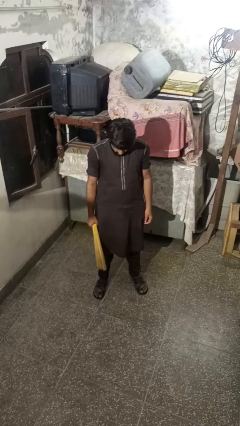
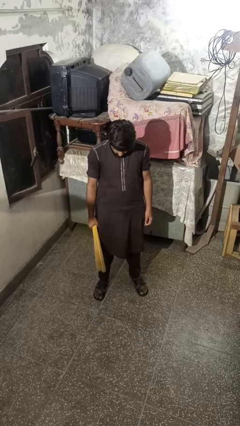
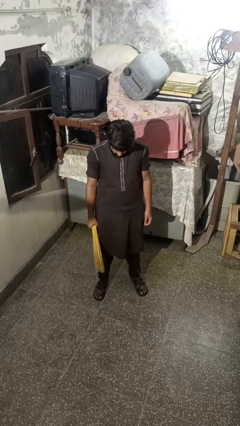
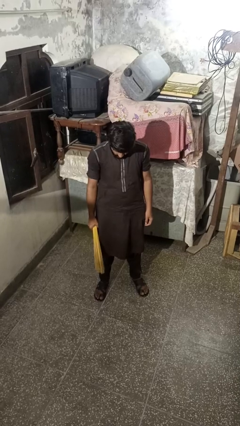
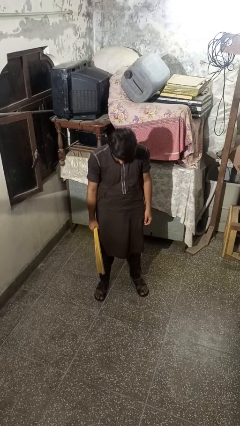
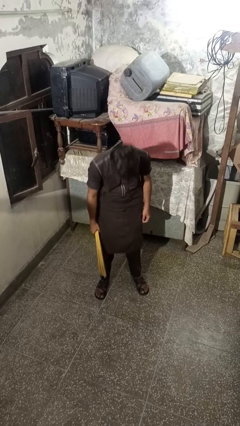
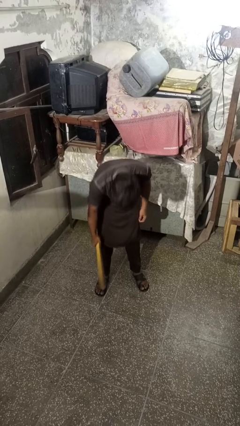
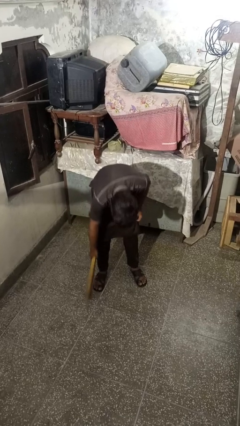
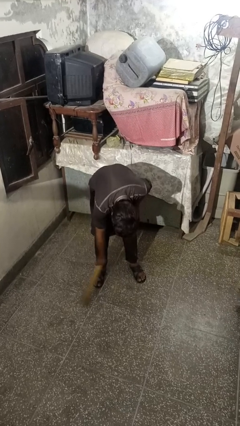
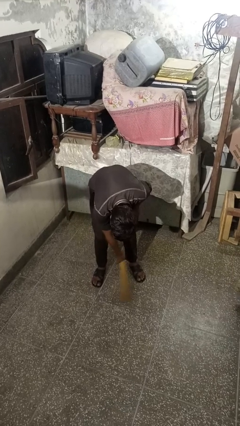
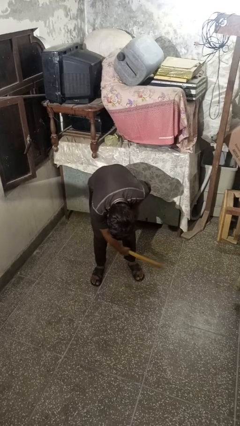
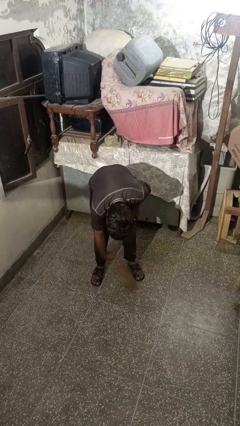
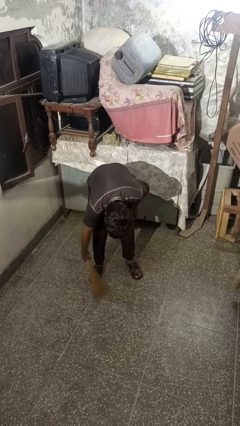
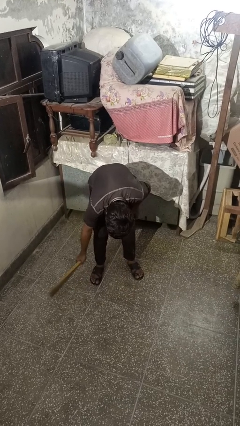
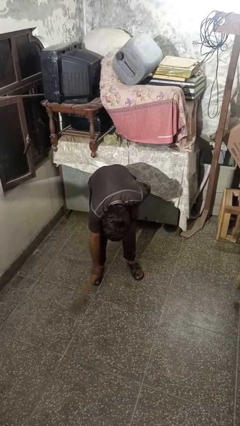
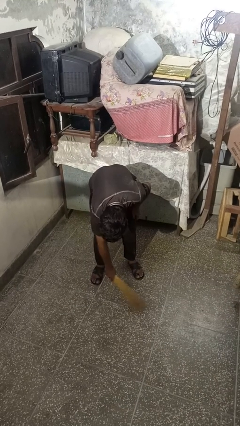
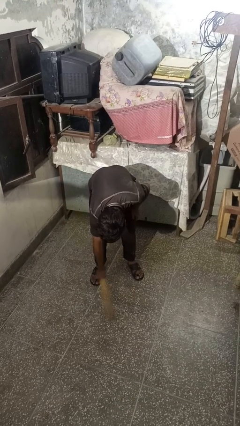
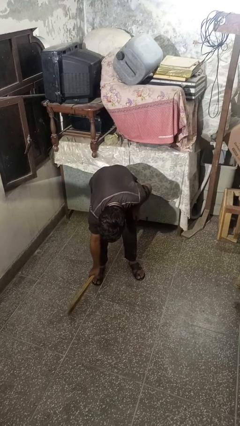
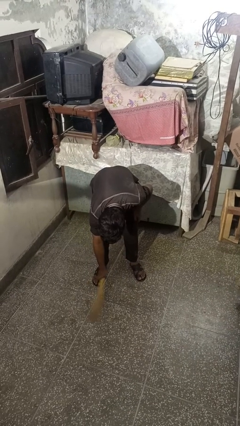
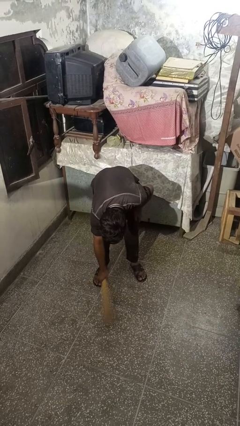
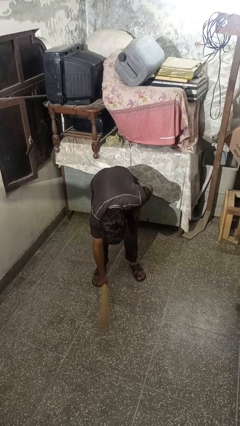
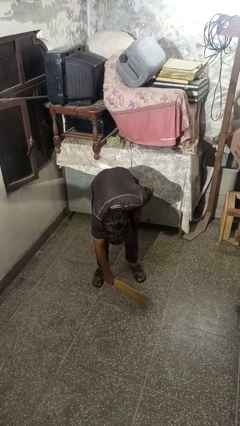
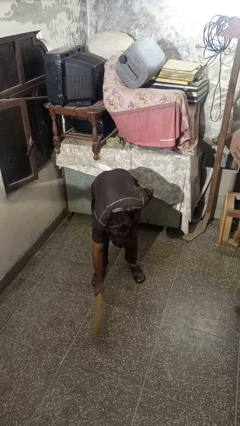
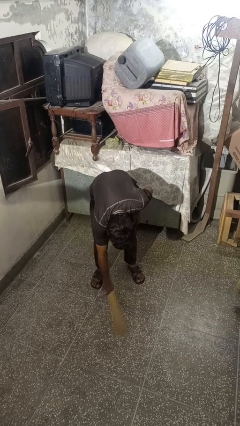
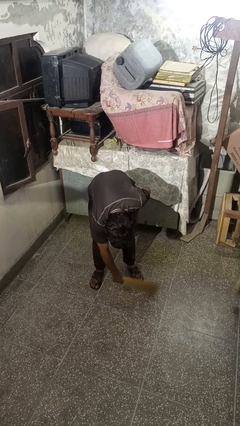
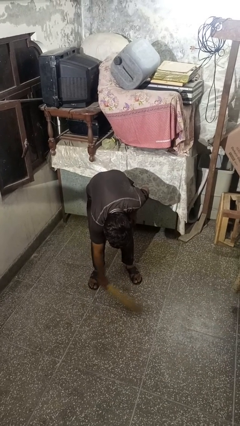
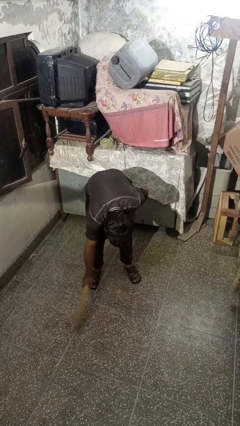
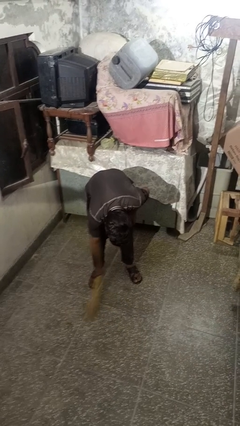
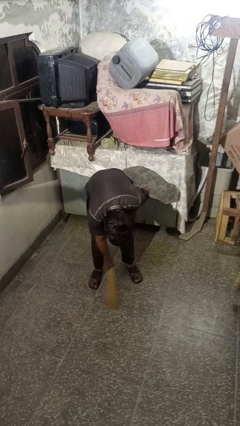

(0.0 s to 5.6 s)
person sweeps floor

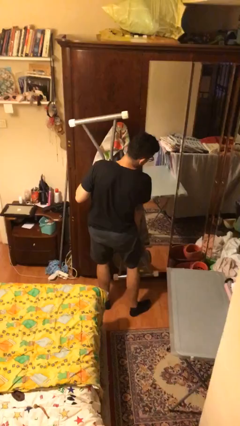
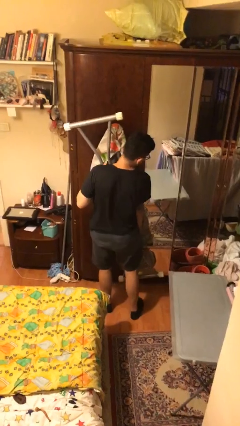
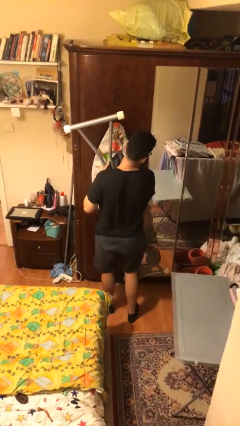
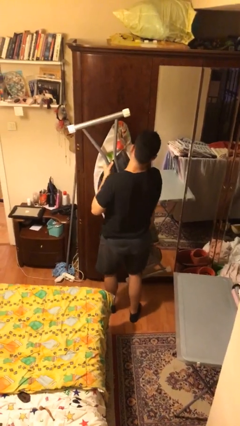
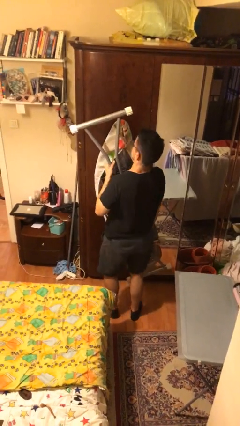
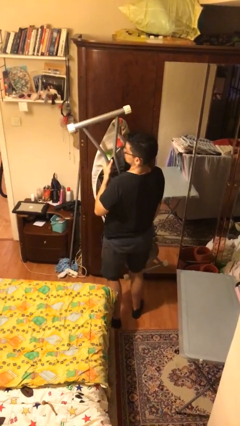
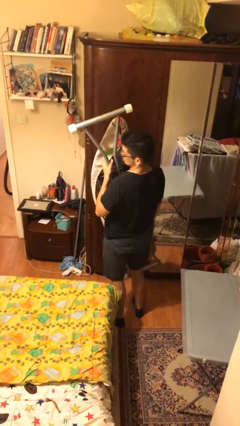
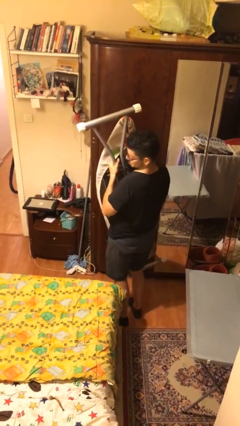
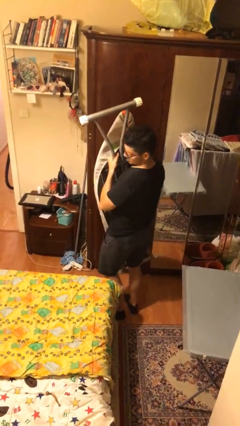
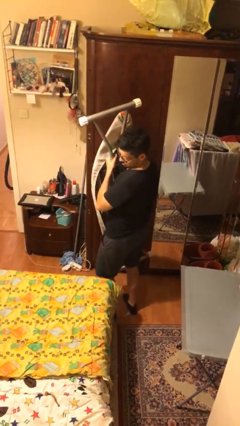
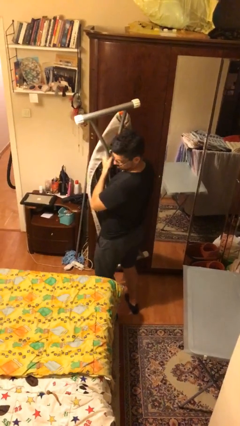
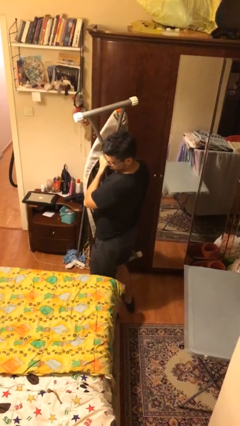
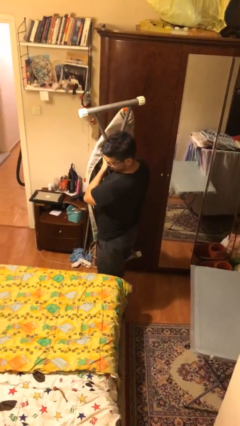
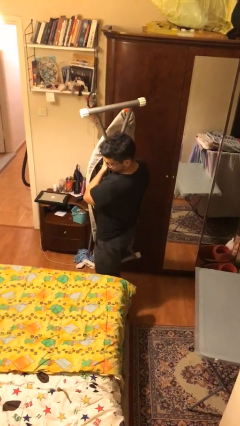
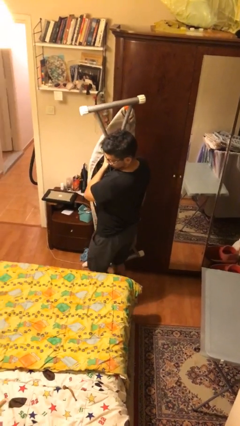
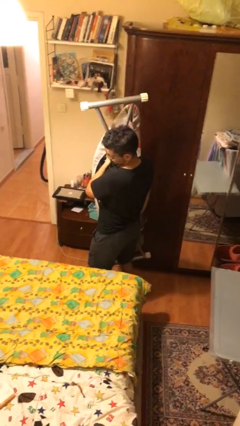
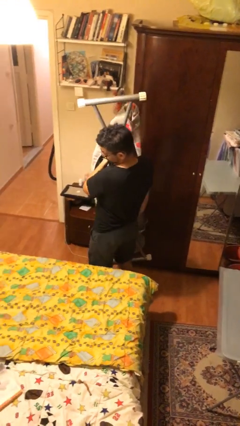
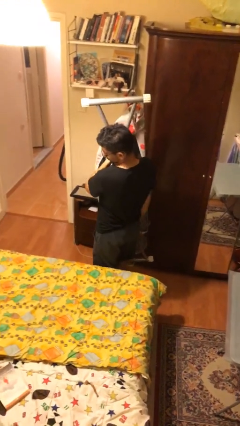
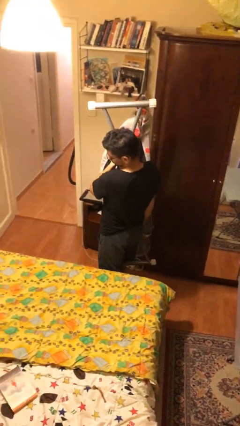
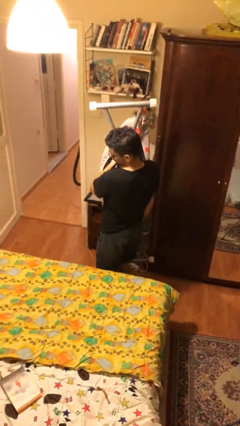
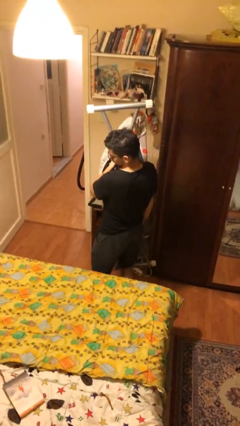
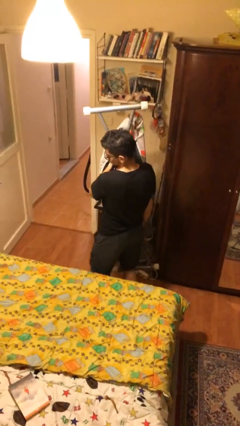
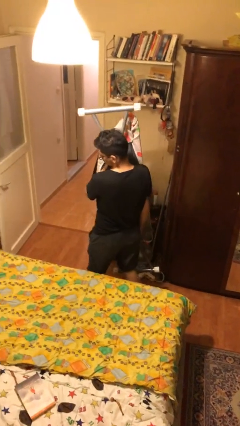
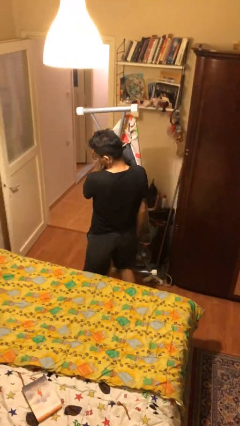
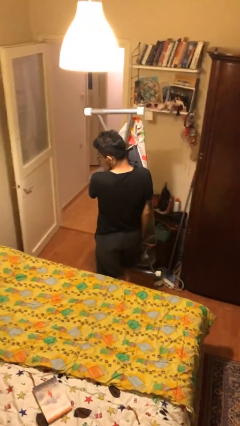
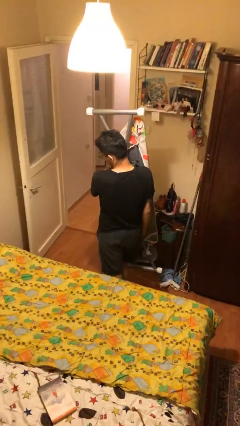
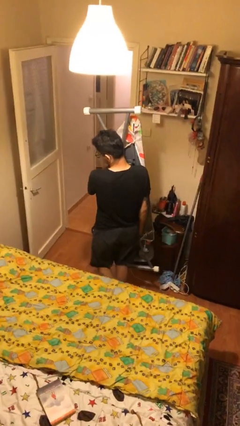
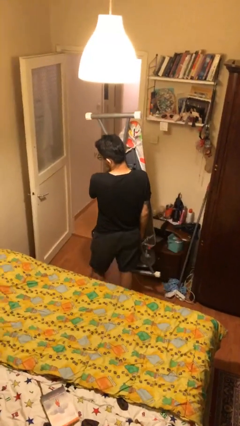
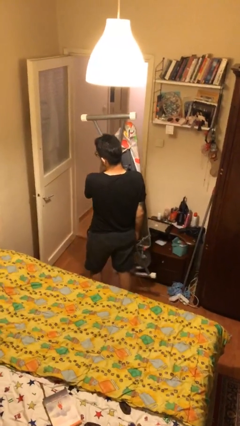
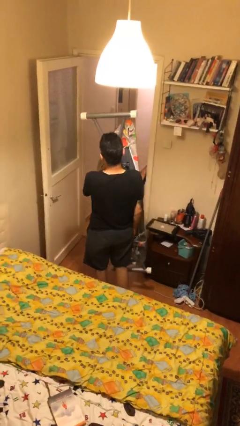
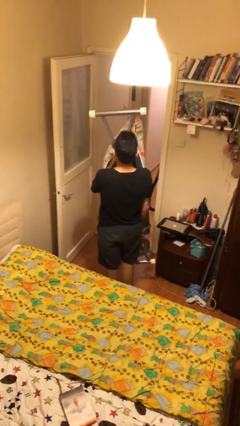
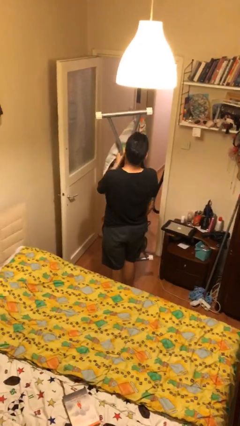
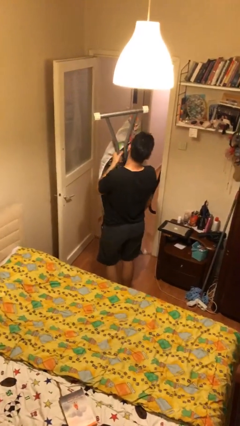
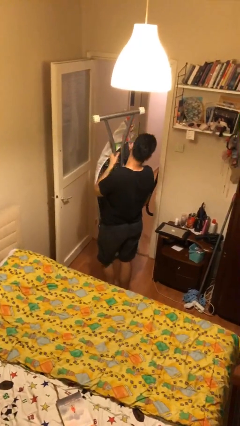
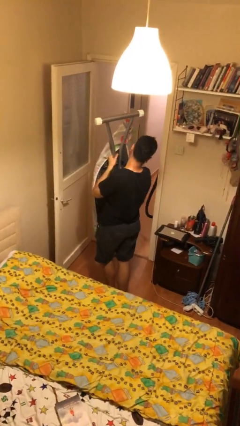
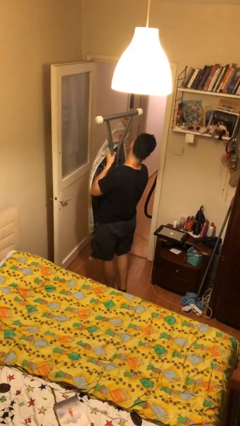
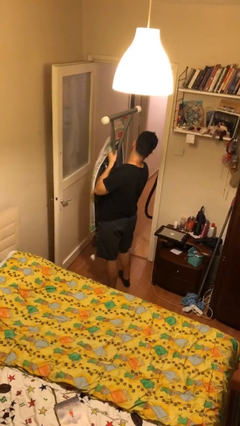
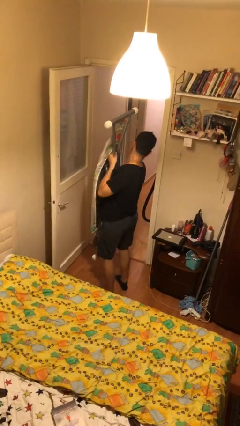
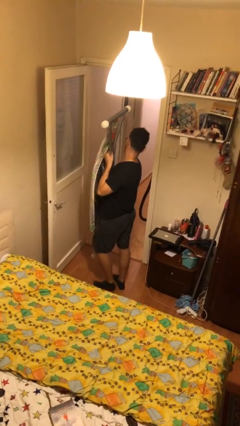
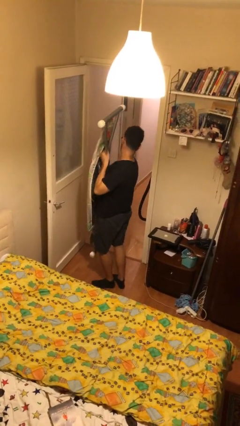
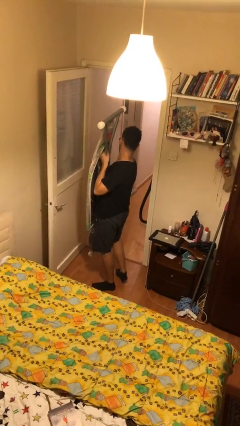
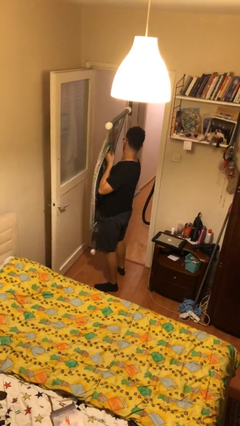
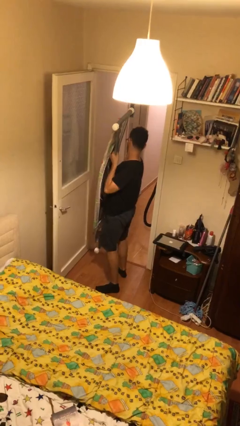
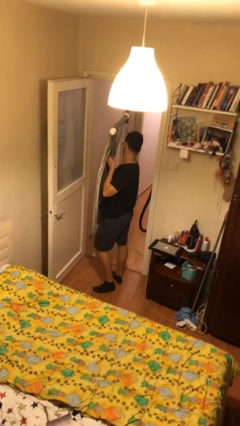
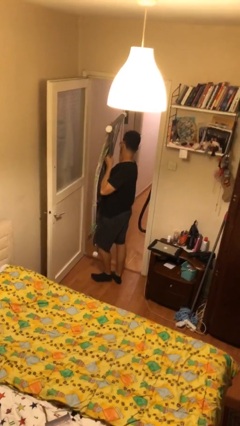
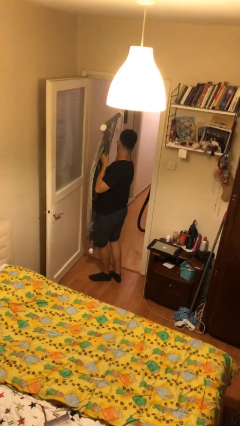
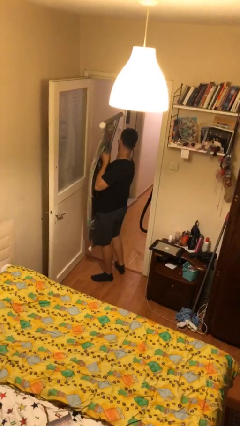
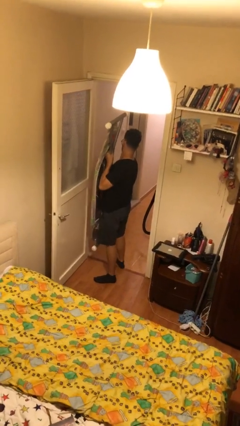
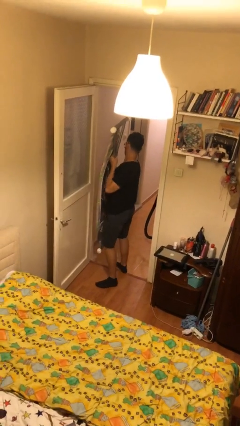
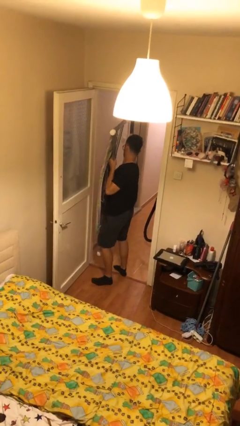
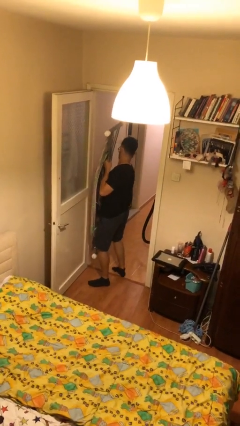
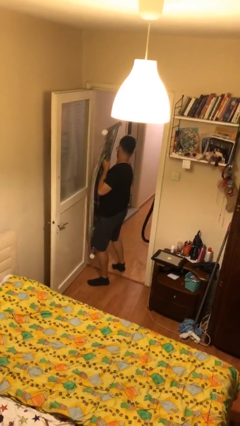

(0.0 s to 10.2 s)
person carries heavy object

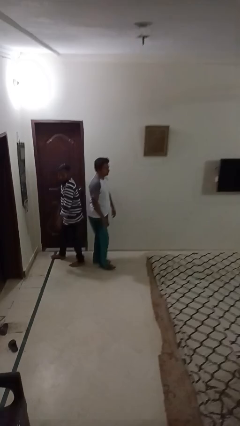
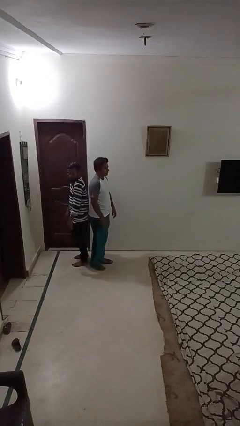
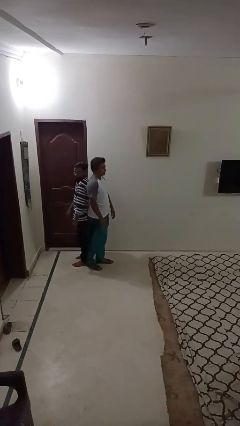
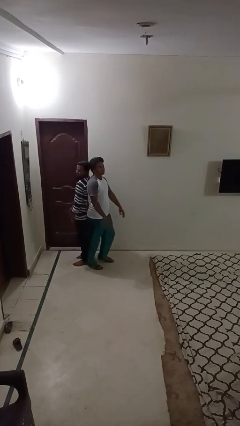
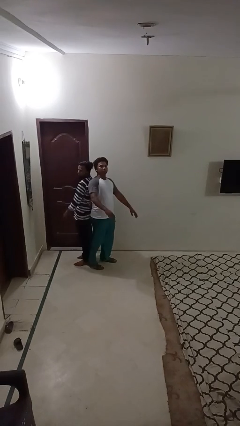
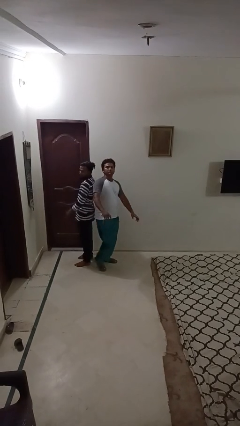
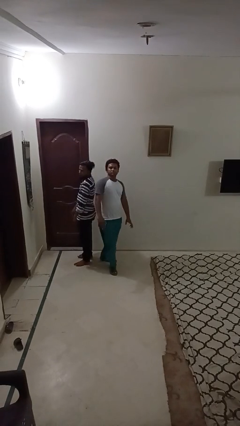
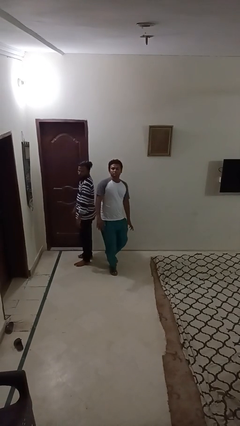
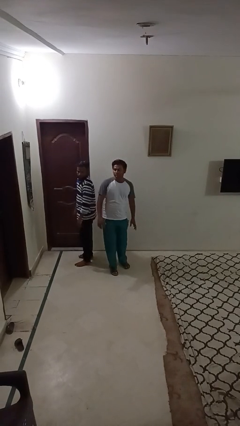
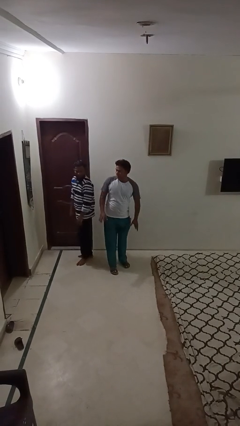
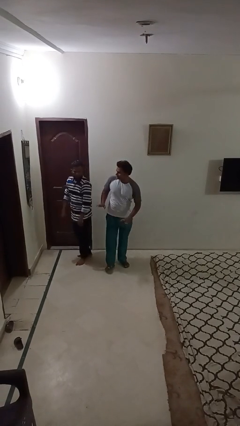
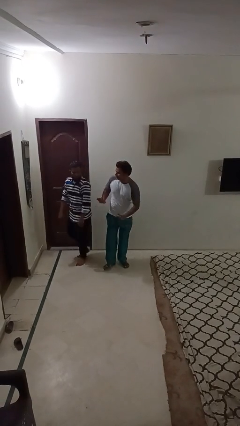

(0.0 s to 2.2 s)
person bumps into person
